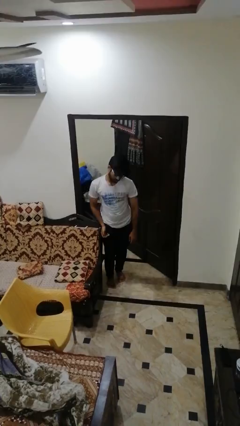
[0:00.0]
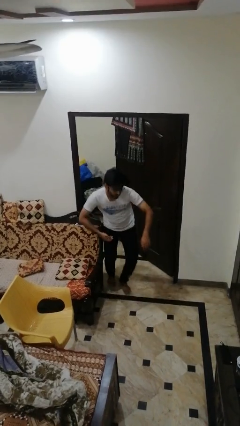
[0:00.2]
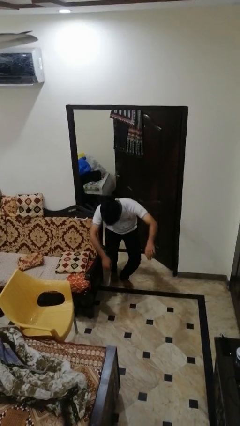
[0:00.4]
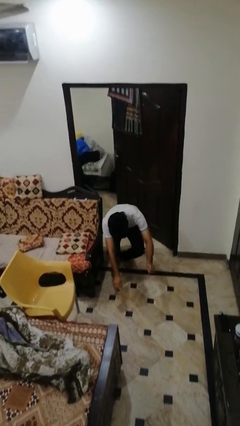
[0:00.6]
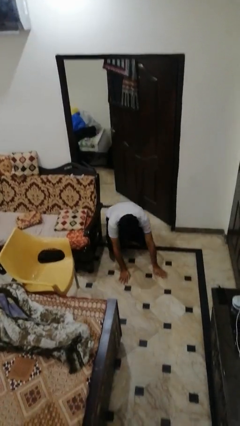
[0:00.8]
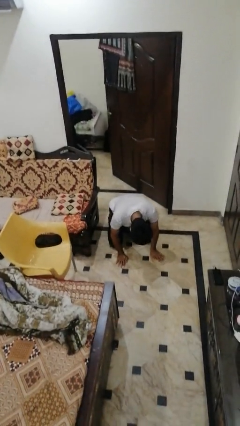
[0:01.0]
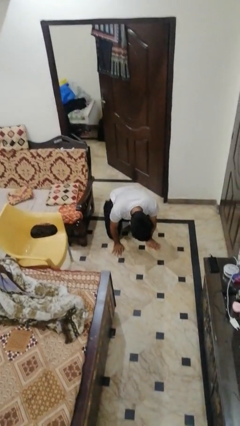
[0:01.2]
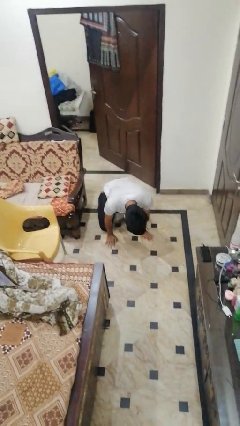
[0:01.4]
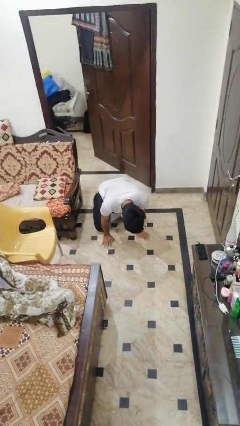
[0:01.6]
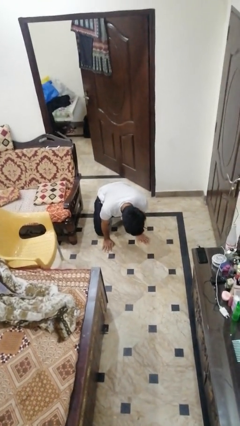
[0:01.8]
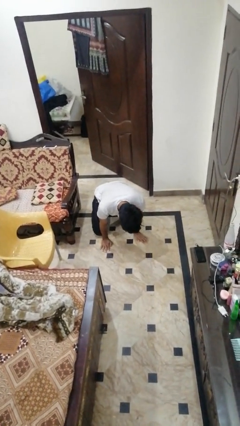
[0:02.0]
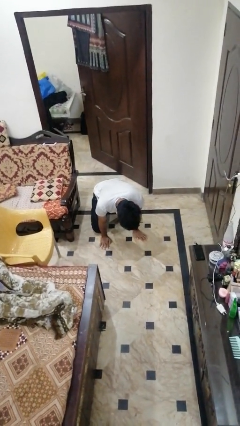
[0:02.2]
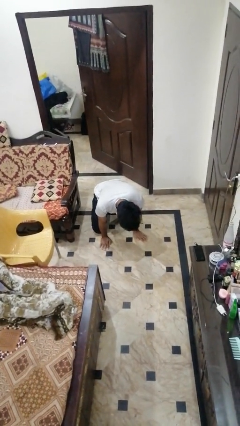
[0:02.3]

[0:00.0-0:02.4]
person trips on object on floor

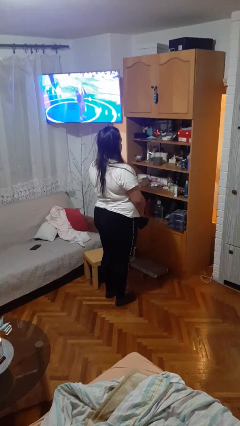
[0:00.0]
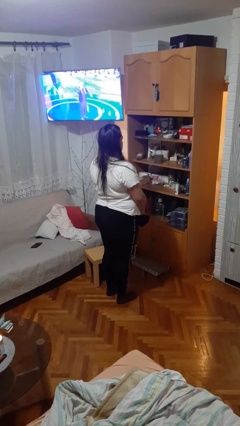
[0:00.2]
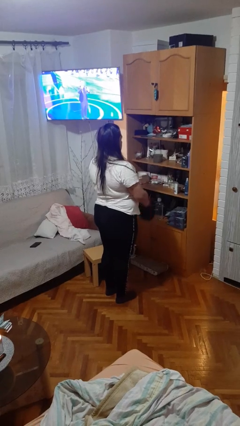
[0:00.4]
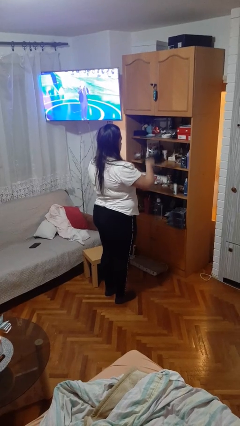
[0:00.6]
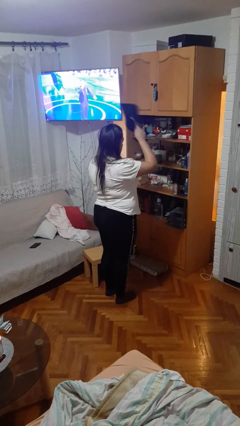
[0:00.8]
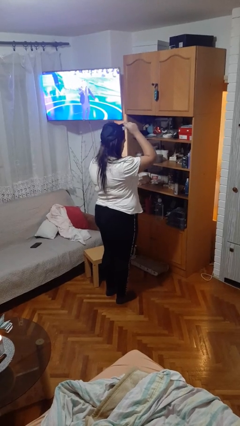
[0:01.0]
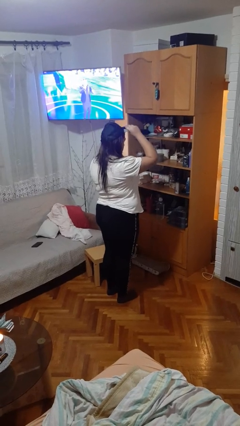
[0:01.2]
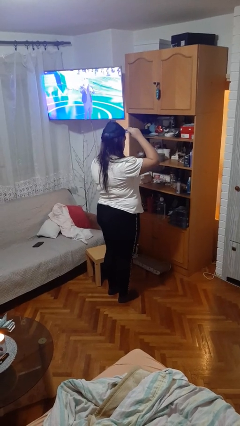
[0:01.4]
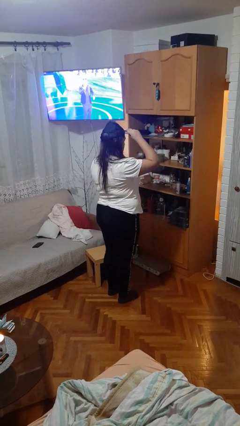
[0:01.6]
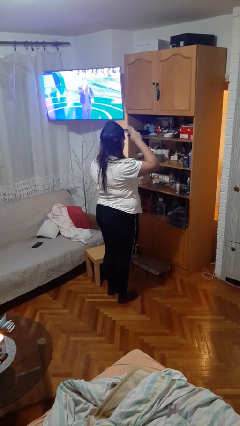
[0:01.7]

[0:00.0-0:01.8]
person puts on hat

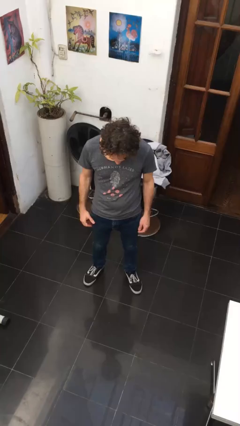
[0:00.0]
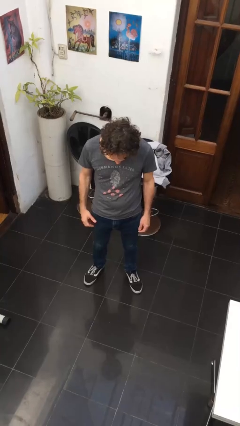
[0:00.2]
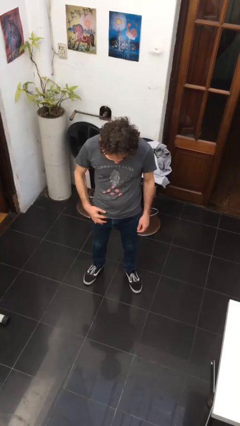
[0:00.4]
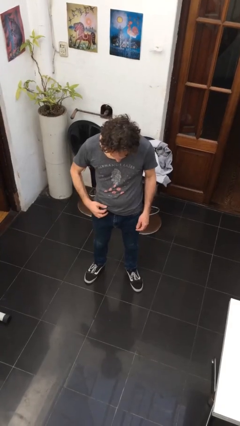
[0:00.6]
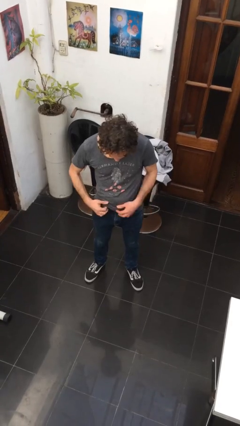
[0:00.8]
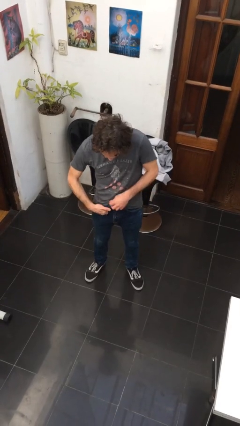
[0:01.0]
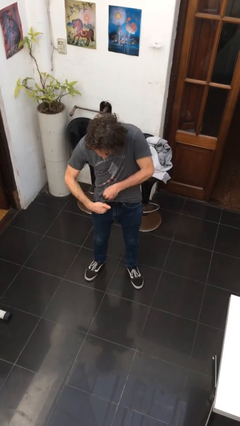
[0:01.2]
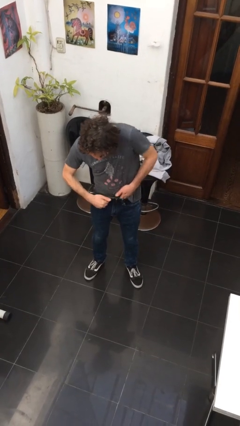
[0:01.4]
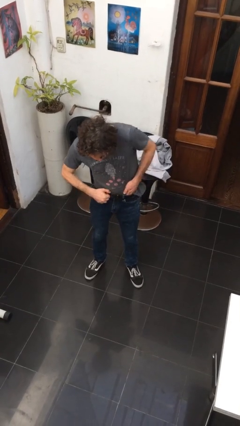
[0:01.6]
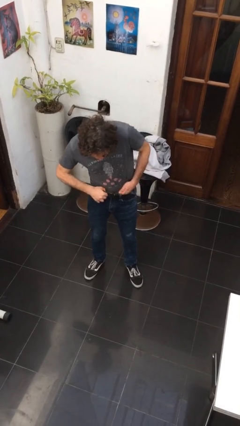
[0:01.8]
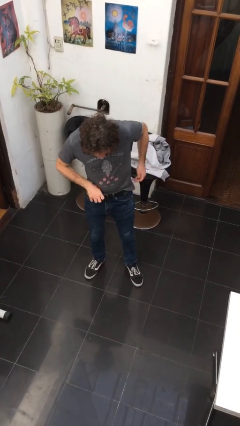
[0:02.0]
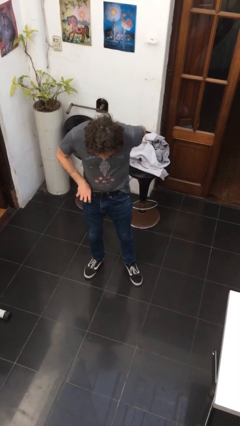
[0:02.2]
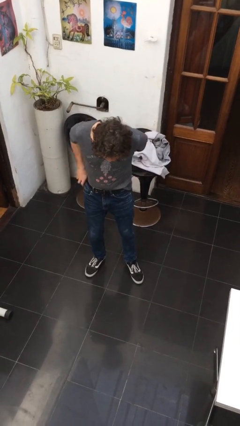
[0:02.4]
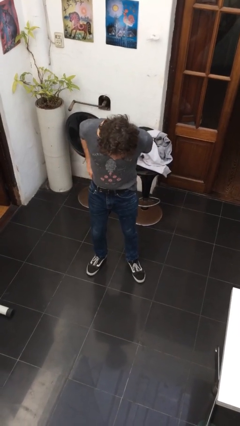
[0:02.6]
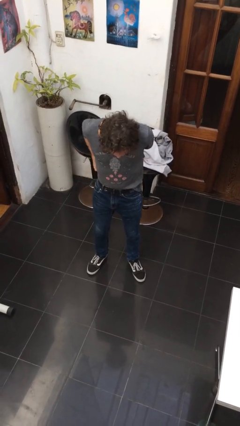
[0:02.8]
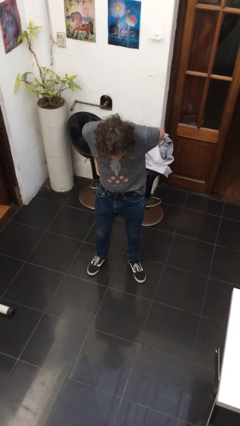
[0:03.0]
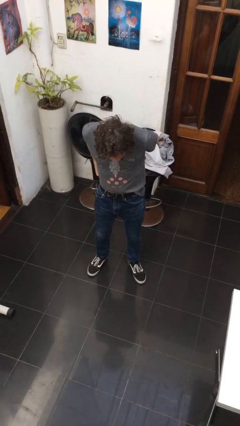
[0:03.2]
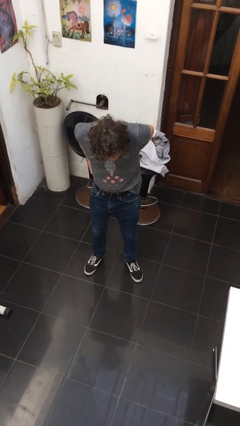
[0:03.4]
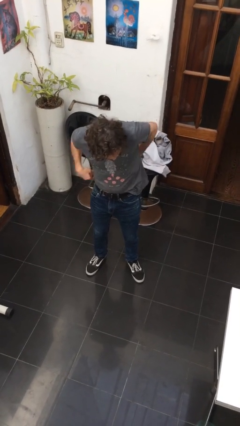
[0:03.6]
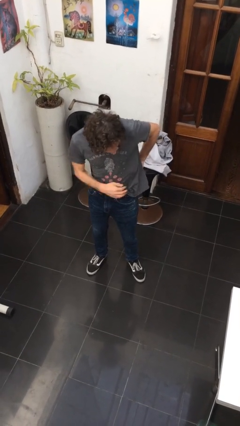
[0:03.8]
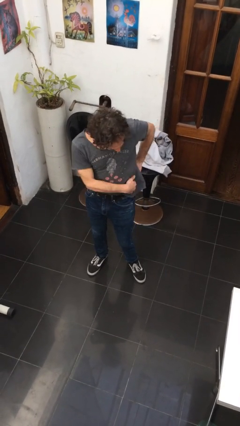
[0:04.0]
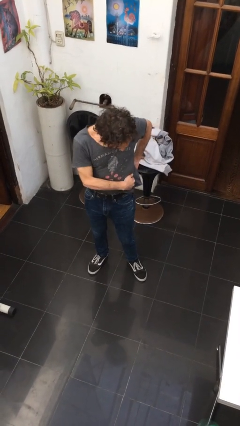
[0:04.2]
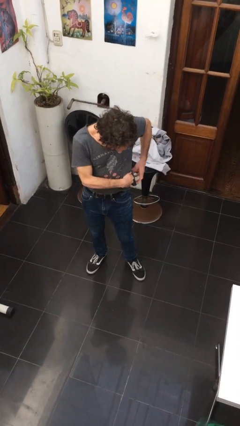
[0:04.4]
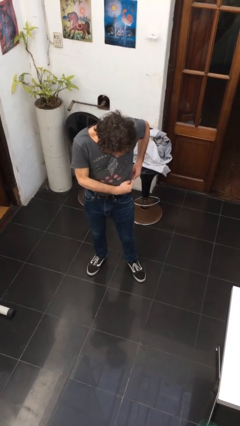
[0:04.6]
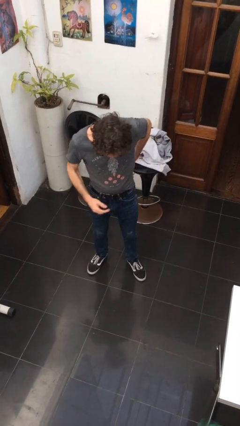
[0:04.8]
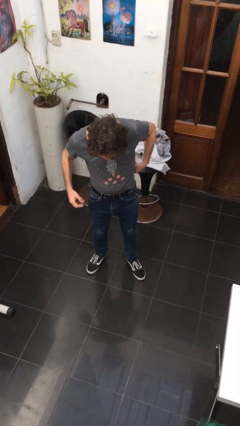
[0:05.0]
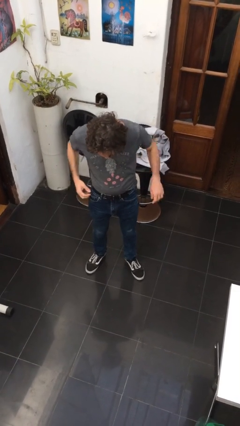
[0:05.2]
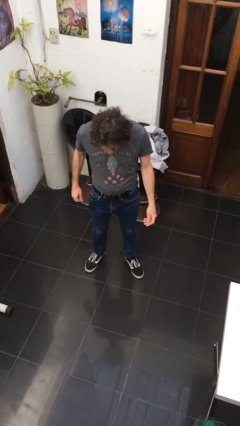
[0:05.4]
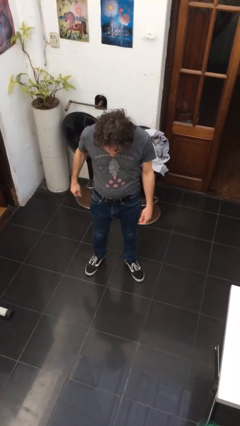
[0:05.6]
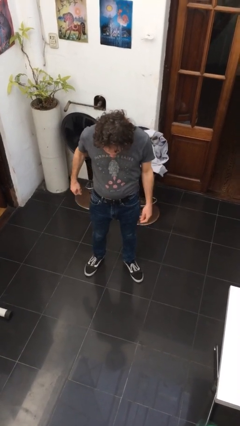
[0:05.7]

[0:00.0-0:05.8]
person tucks in shirt

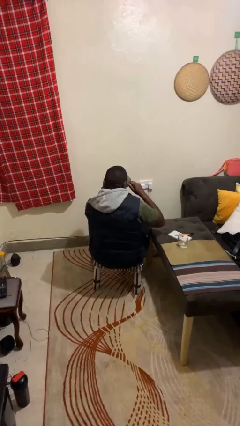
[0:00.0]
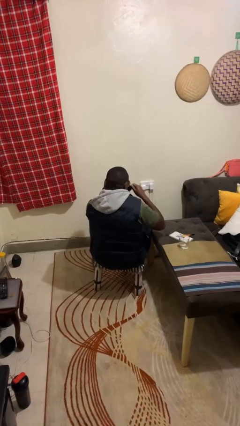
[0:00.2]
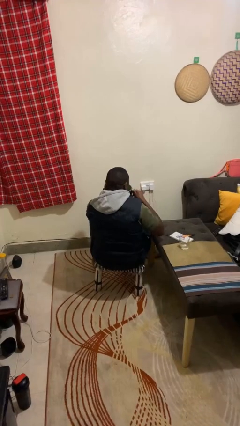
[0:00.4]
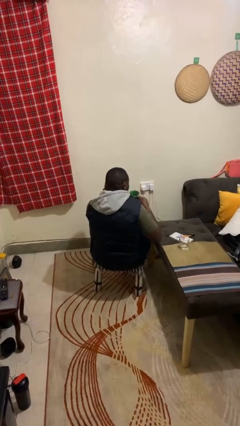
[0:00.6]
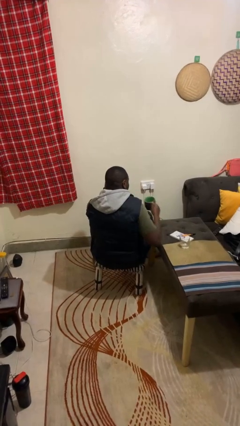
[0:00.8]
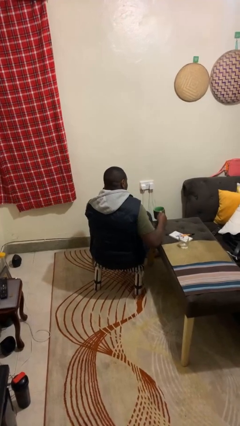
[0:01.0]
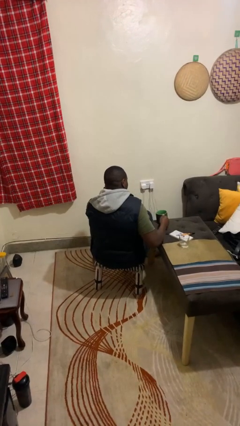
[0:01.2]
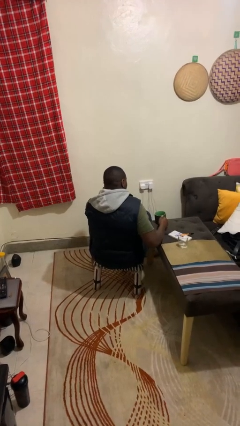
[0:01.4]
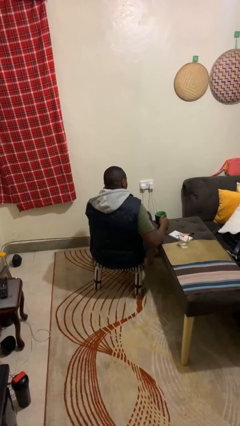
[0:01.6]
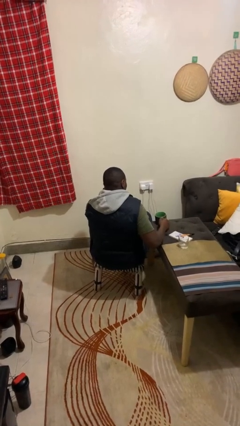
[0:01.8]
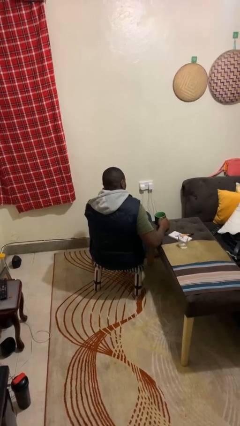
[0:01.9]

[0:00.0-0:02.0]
person puts down object on table

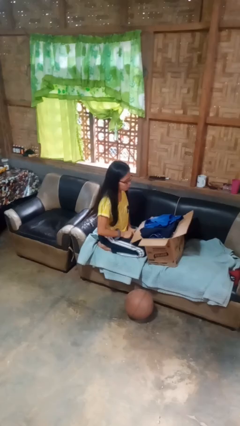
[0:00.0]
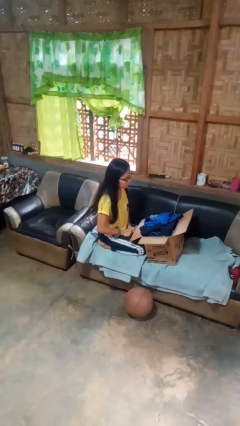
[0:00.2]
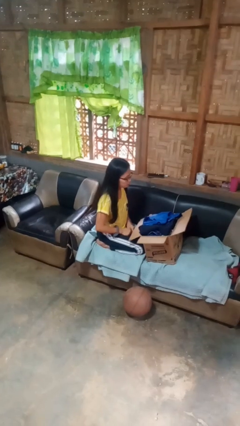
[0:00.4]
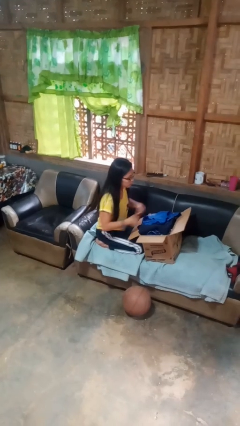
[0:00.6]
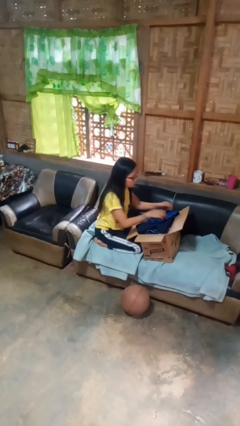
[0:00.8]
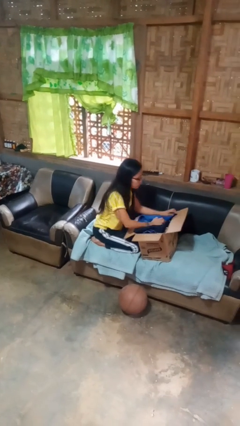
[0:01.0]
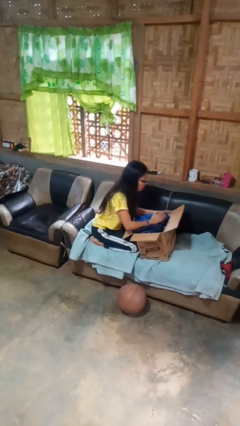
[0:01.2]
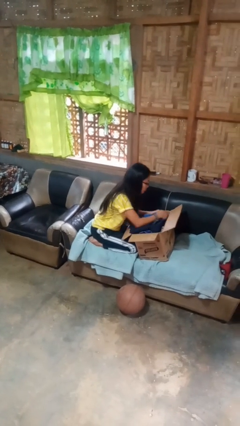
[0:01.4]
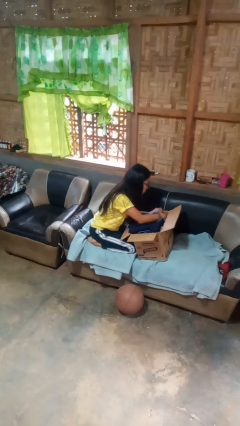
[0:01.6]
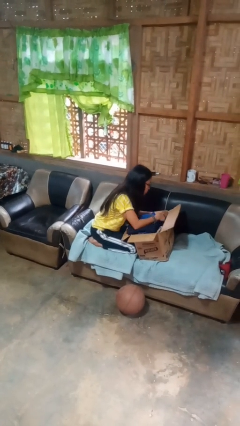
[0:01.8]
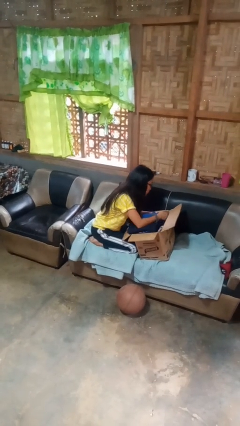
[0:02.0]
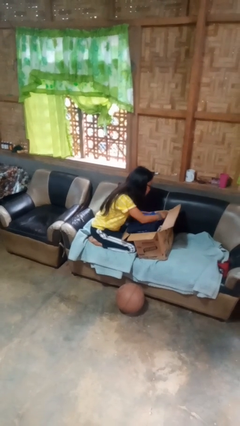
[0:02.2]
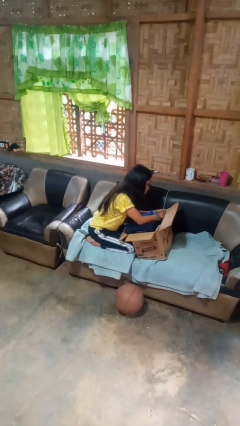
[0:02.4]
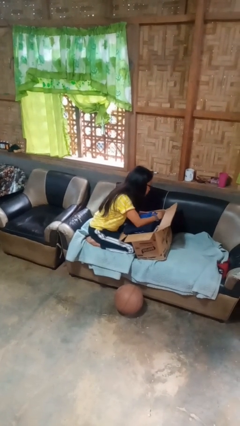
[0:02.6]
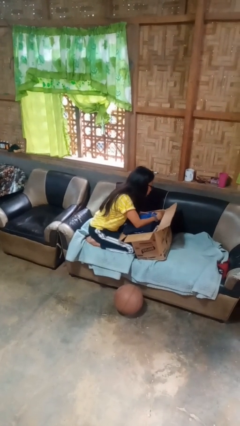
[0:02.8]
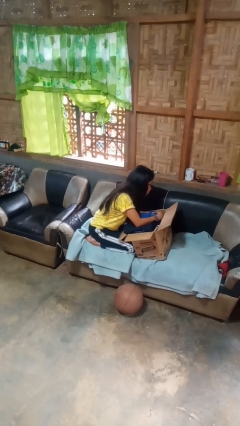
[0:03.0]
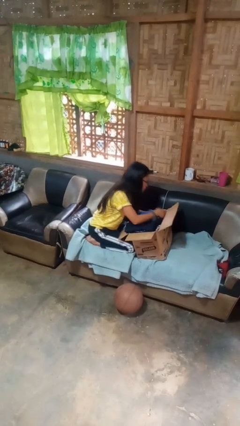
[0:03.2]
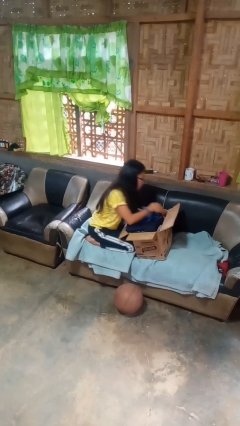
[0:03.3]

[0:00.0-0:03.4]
person searches in box

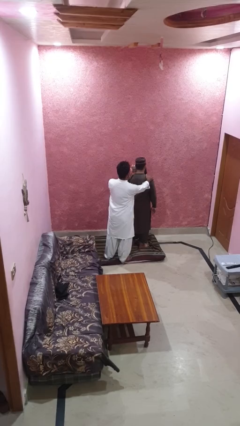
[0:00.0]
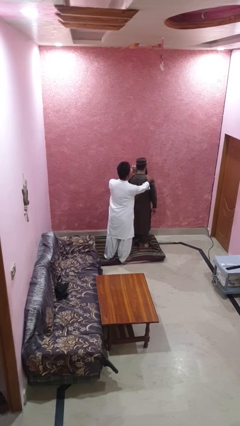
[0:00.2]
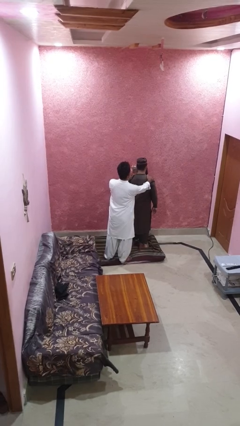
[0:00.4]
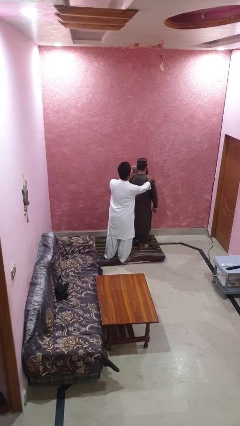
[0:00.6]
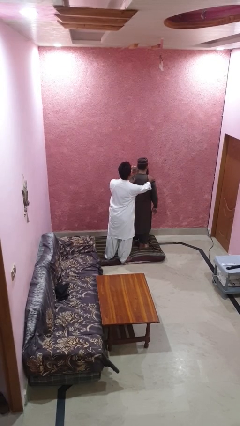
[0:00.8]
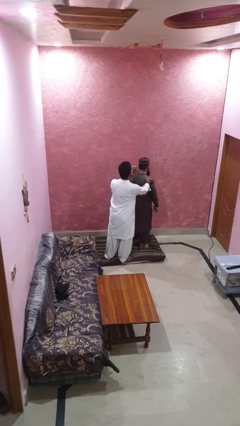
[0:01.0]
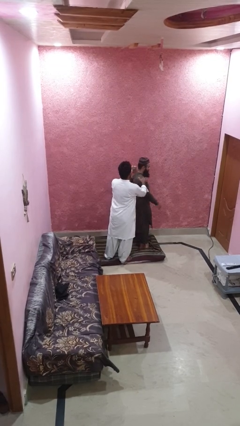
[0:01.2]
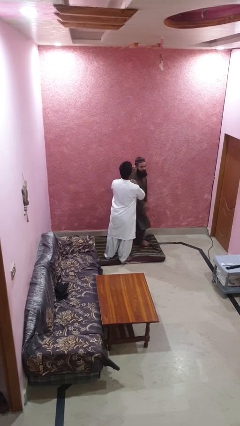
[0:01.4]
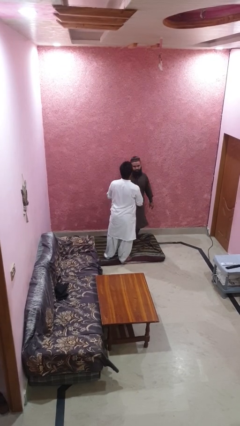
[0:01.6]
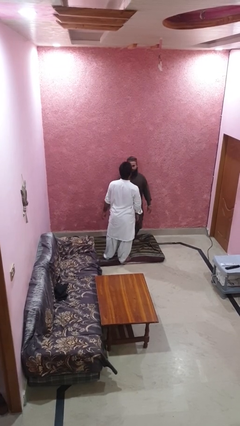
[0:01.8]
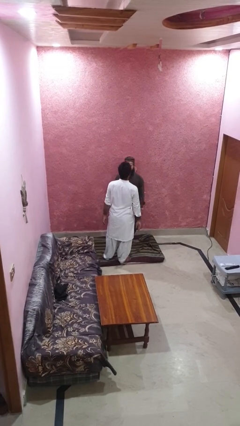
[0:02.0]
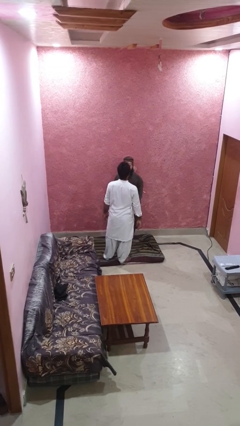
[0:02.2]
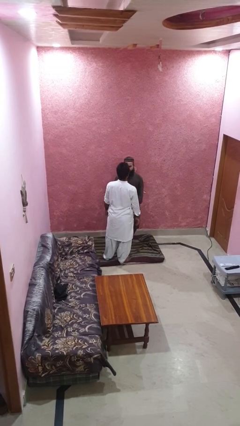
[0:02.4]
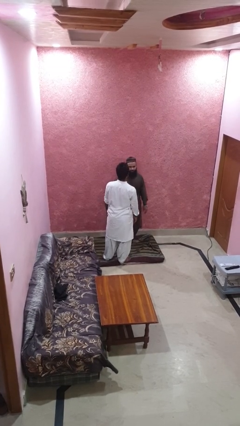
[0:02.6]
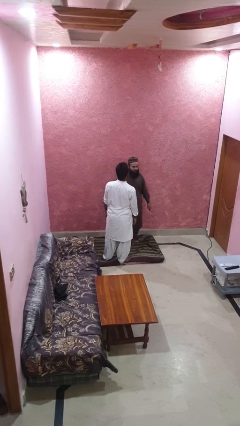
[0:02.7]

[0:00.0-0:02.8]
person spins person around
